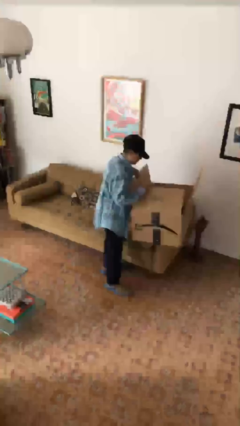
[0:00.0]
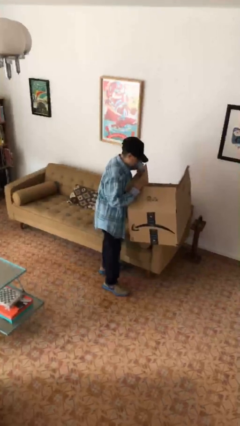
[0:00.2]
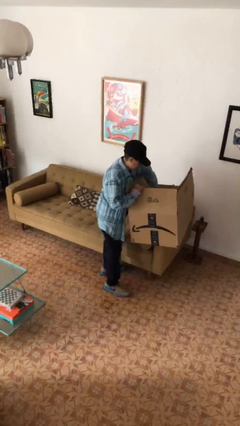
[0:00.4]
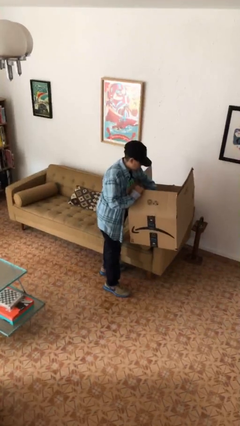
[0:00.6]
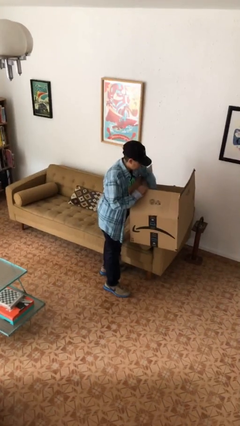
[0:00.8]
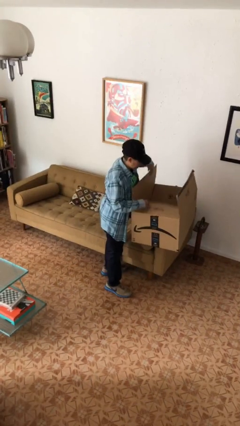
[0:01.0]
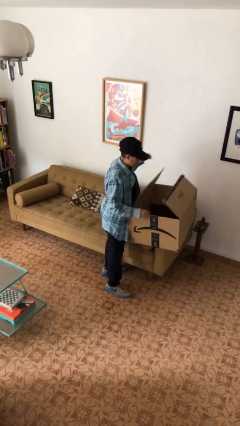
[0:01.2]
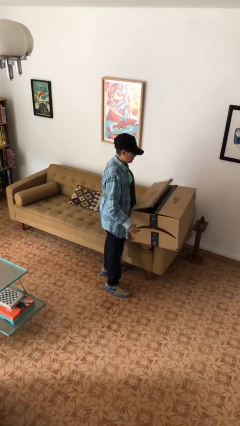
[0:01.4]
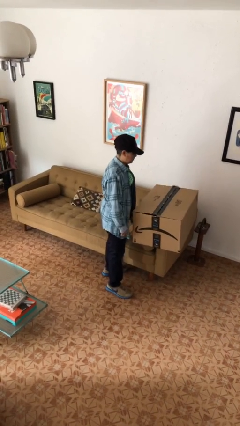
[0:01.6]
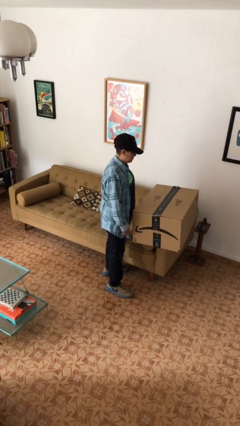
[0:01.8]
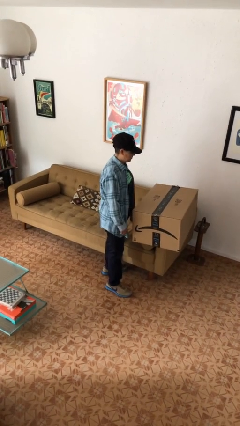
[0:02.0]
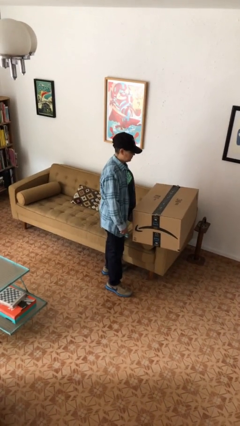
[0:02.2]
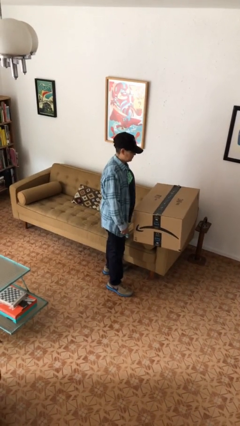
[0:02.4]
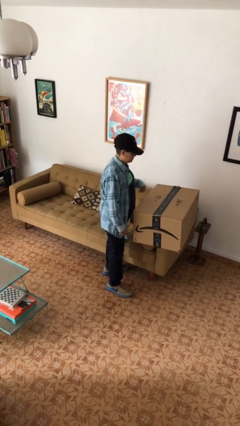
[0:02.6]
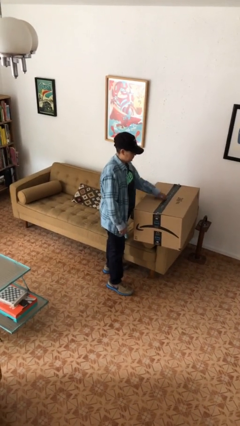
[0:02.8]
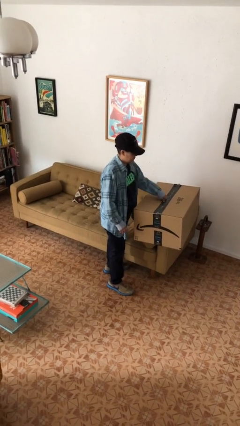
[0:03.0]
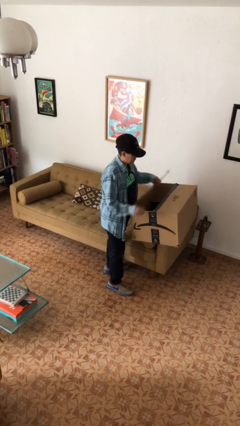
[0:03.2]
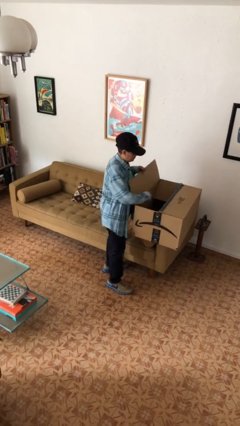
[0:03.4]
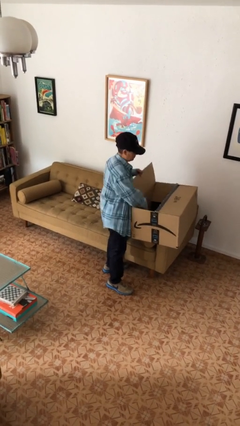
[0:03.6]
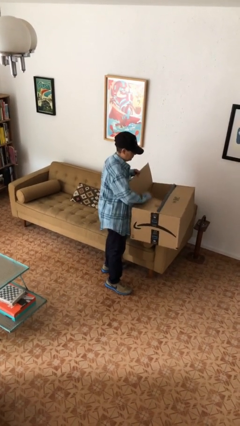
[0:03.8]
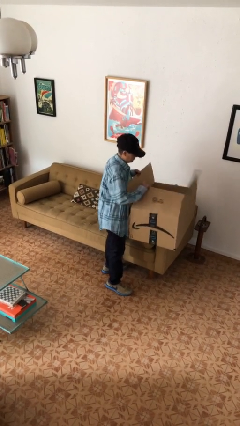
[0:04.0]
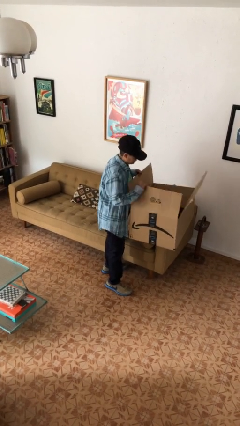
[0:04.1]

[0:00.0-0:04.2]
person searches in box

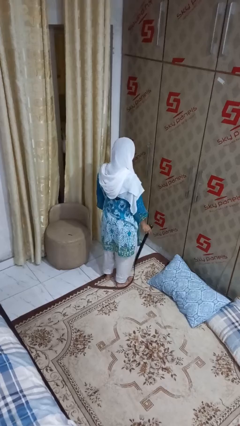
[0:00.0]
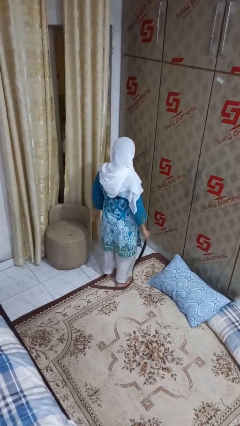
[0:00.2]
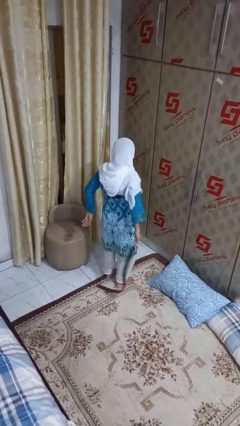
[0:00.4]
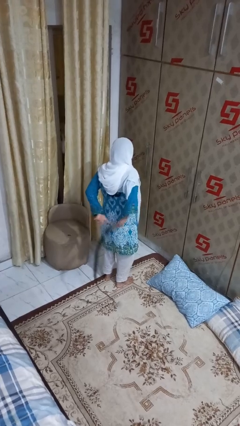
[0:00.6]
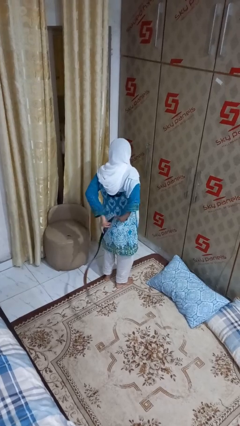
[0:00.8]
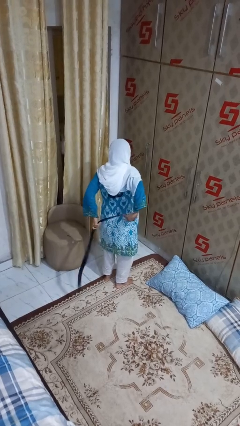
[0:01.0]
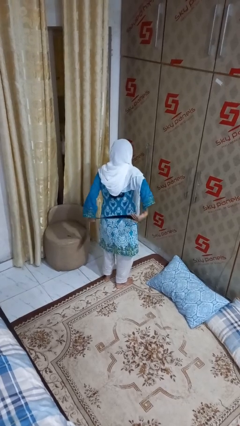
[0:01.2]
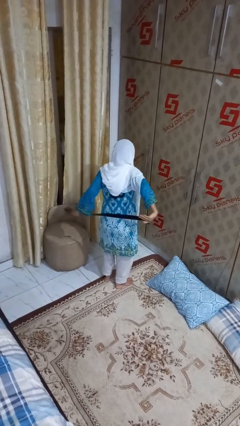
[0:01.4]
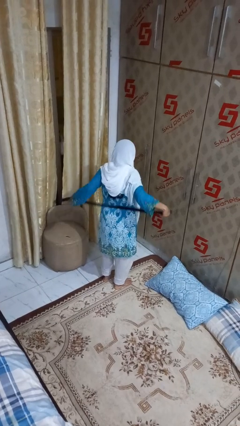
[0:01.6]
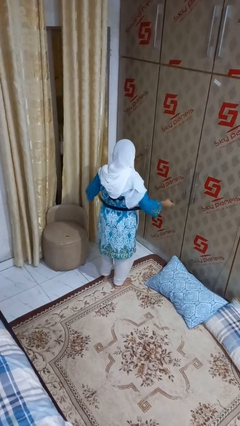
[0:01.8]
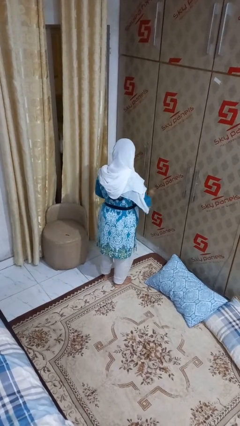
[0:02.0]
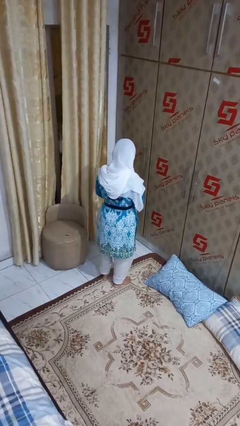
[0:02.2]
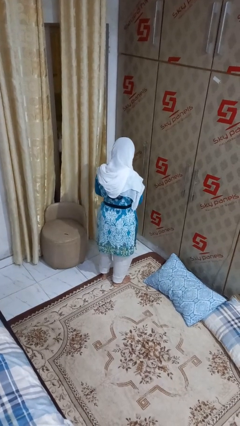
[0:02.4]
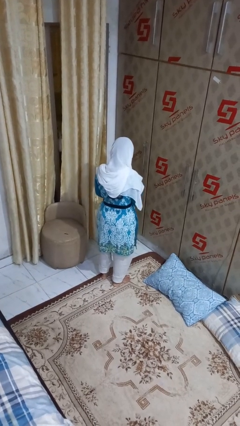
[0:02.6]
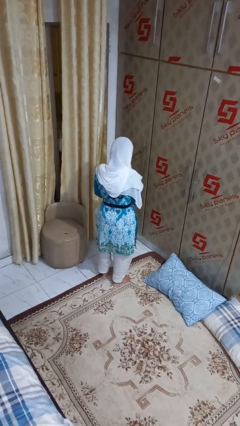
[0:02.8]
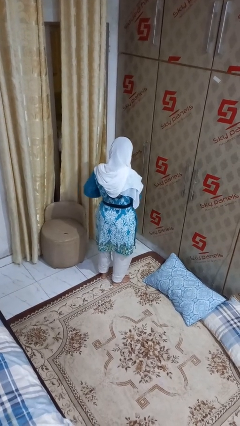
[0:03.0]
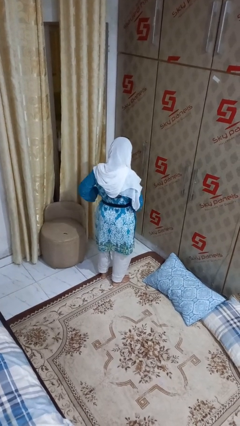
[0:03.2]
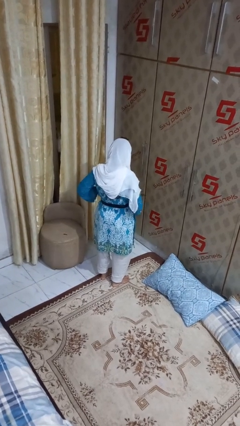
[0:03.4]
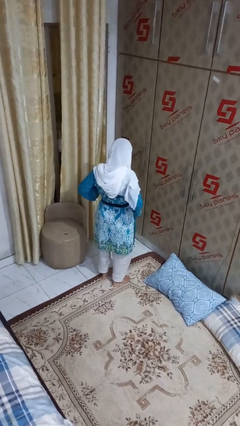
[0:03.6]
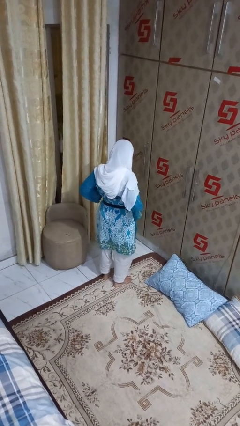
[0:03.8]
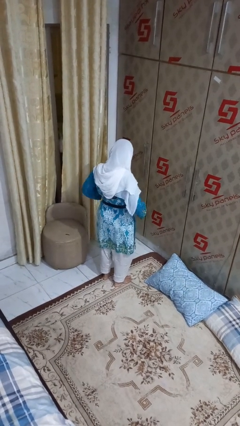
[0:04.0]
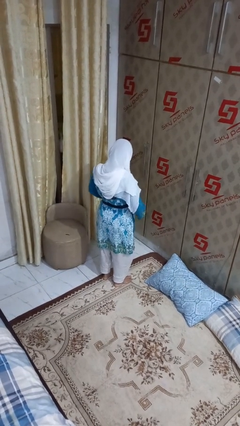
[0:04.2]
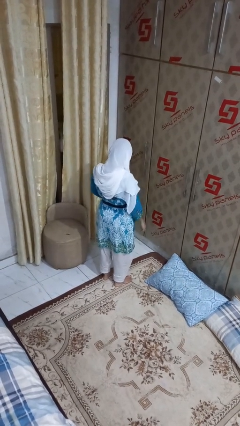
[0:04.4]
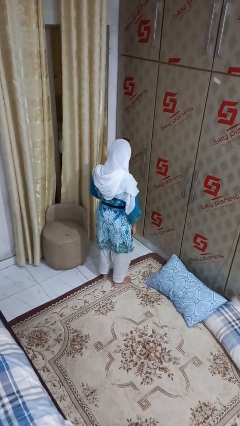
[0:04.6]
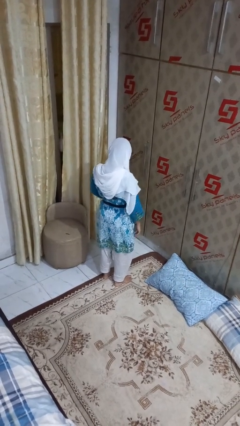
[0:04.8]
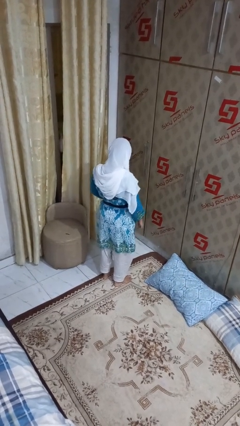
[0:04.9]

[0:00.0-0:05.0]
person puts on belt

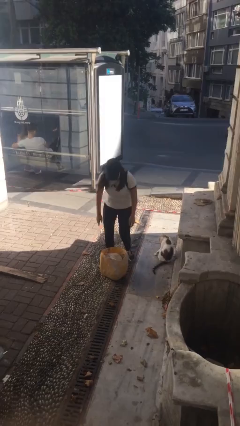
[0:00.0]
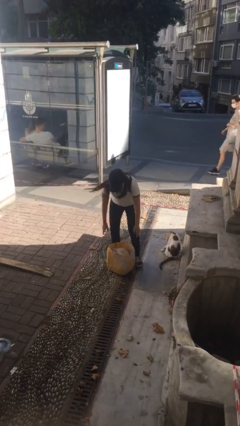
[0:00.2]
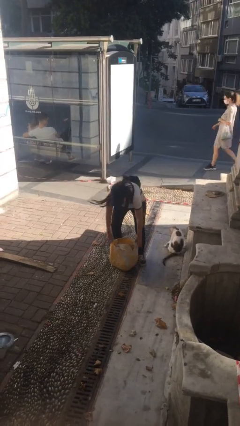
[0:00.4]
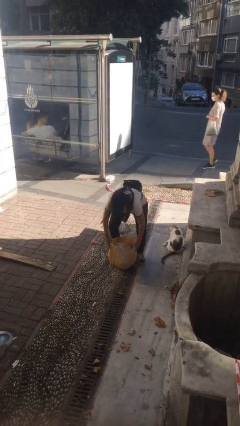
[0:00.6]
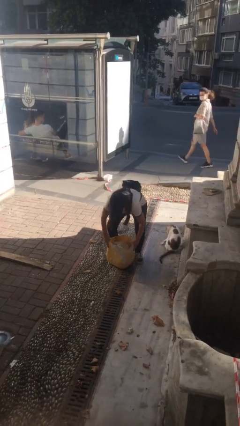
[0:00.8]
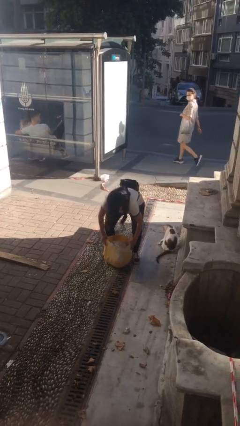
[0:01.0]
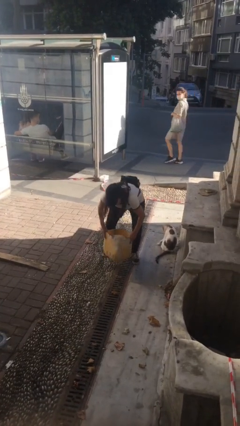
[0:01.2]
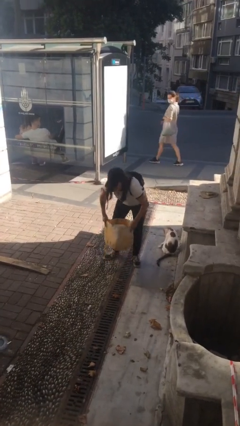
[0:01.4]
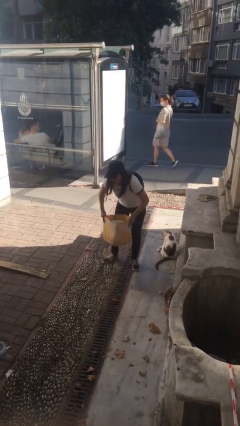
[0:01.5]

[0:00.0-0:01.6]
person picks up object from floor

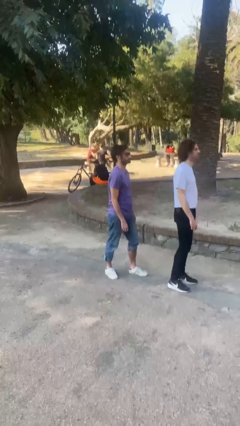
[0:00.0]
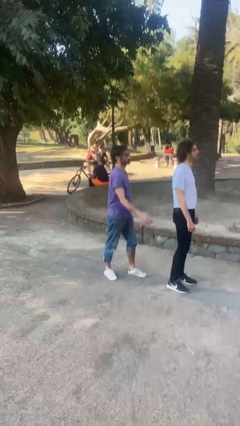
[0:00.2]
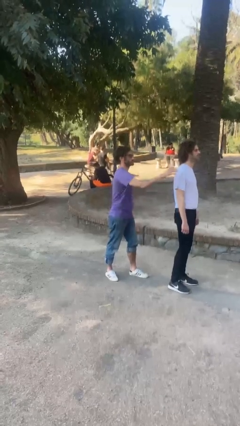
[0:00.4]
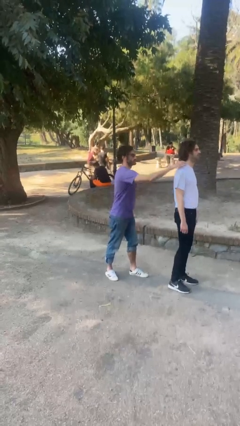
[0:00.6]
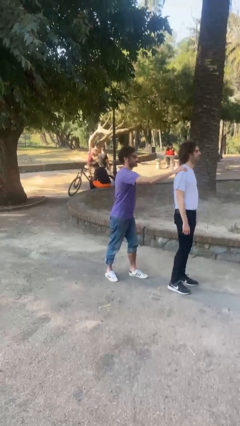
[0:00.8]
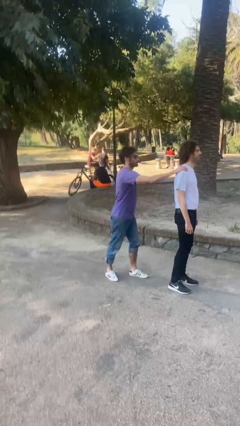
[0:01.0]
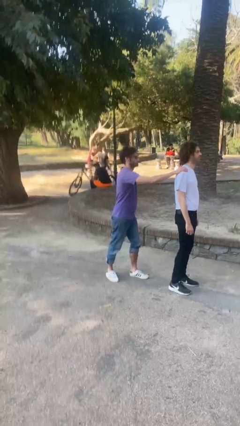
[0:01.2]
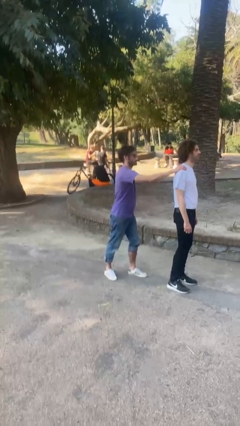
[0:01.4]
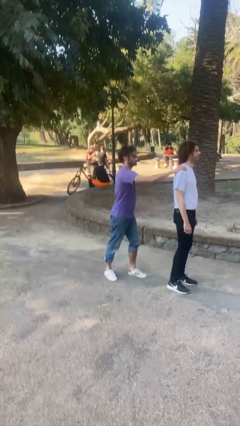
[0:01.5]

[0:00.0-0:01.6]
person grabs person by shoulder

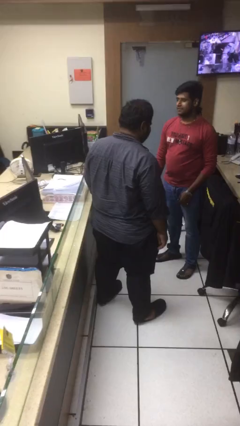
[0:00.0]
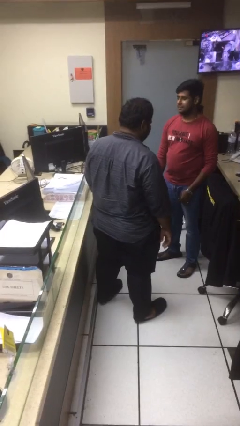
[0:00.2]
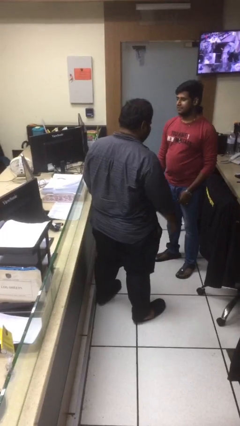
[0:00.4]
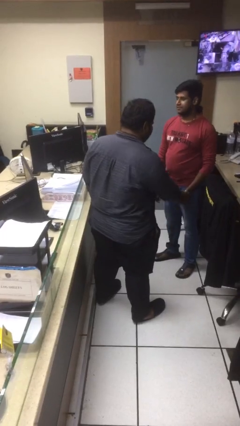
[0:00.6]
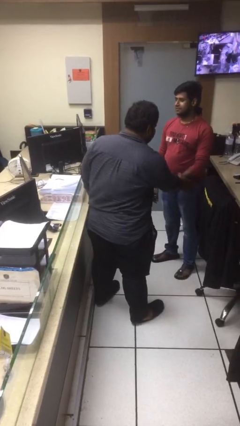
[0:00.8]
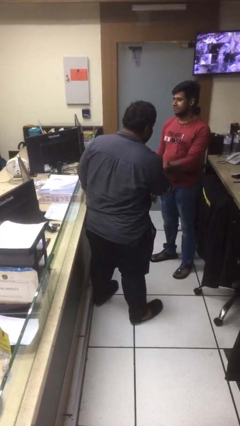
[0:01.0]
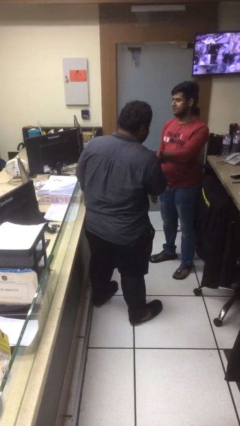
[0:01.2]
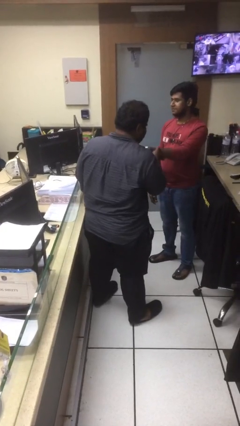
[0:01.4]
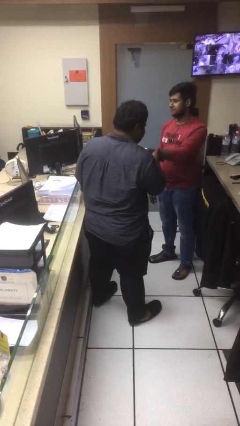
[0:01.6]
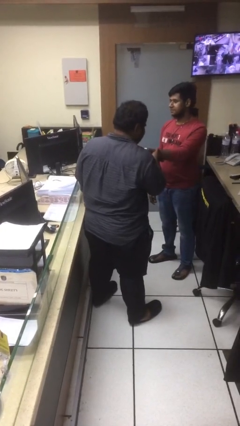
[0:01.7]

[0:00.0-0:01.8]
person grabs person by forearm

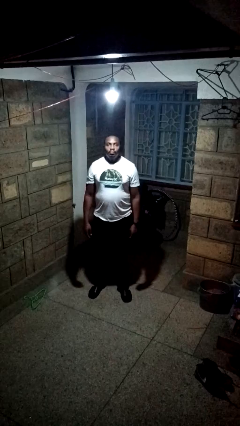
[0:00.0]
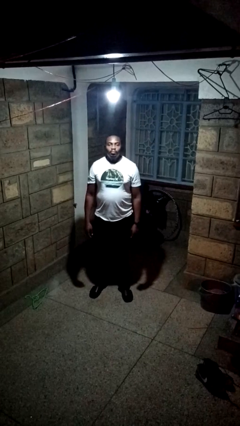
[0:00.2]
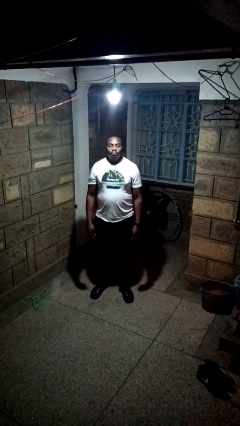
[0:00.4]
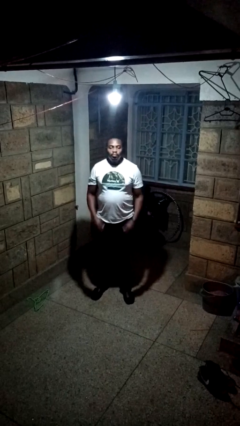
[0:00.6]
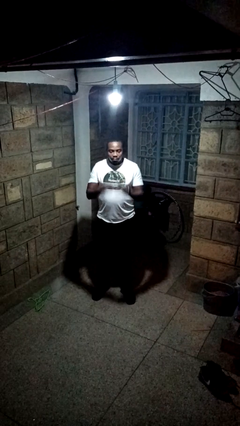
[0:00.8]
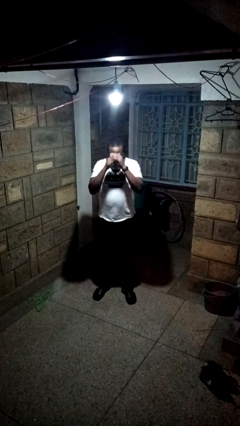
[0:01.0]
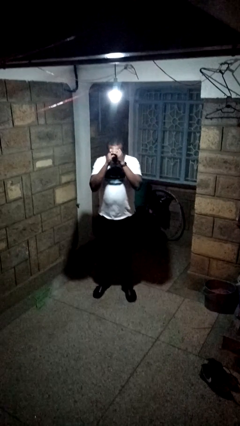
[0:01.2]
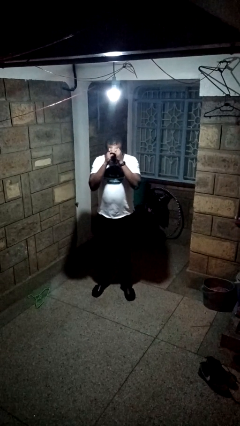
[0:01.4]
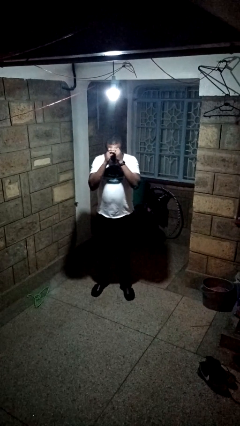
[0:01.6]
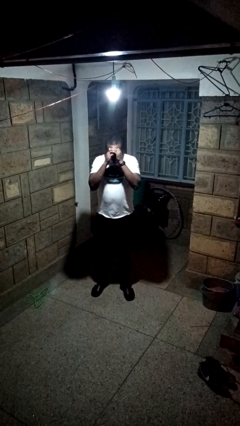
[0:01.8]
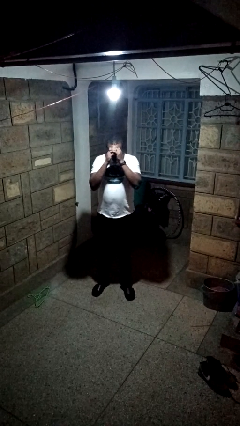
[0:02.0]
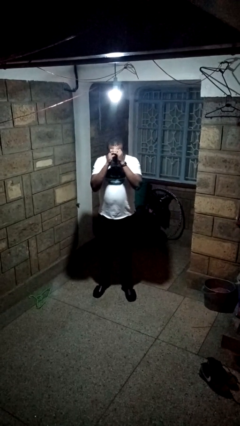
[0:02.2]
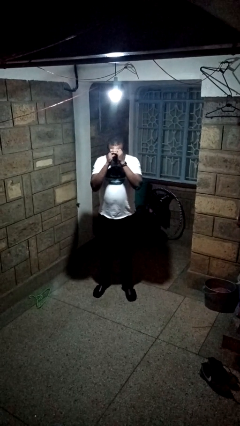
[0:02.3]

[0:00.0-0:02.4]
person shades eyes
